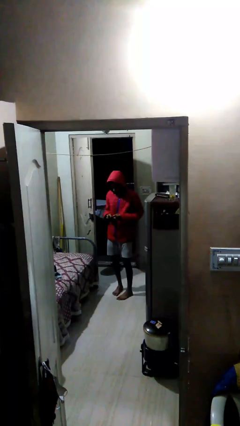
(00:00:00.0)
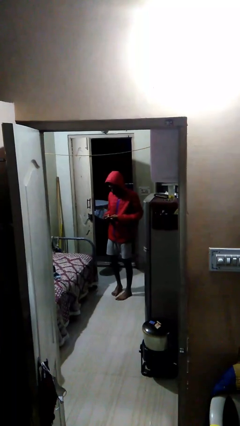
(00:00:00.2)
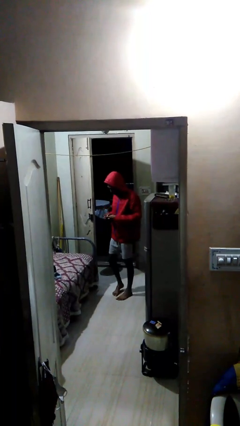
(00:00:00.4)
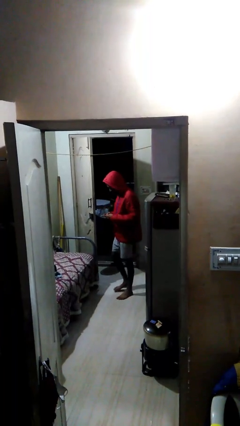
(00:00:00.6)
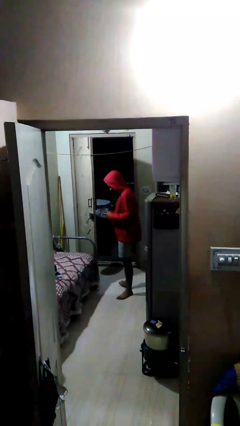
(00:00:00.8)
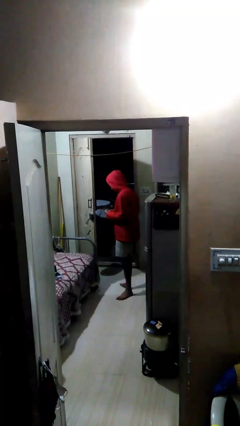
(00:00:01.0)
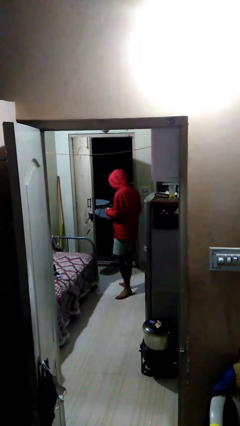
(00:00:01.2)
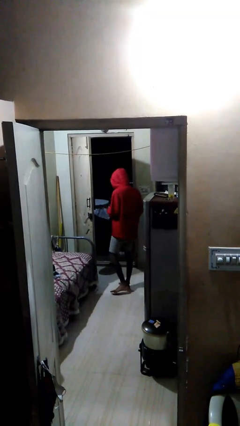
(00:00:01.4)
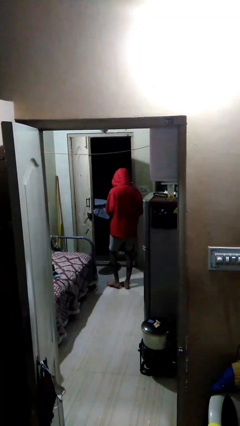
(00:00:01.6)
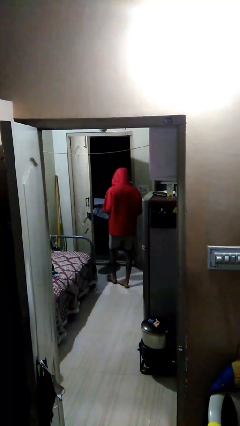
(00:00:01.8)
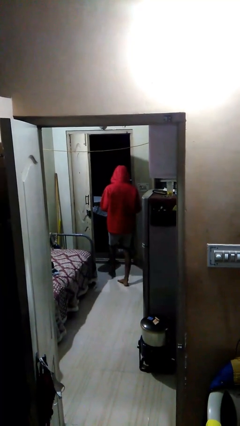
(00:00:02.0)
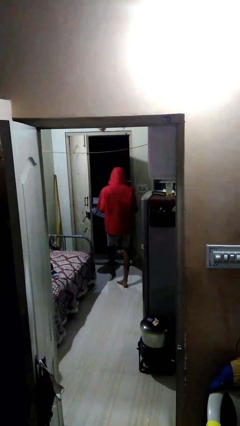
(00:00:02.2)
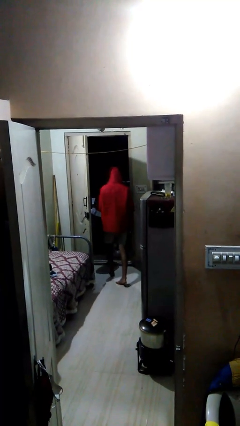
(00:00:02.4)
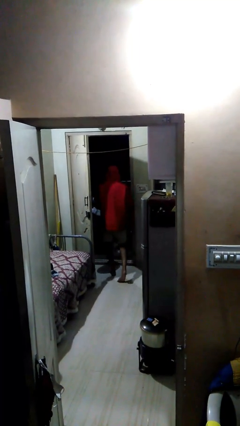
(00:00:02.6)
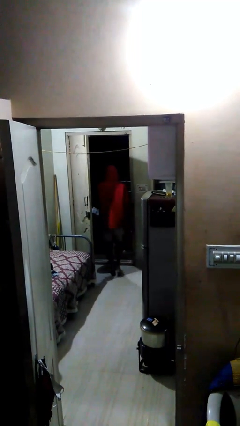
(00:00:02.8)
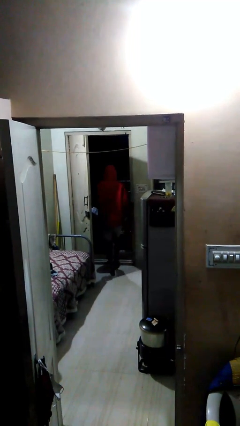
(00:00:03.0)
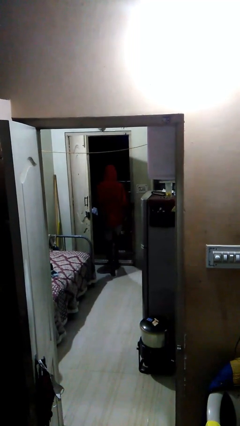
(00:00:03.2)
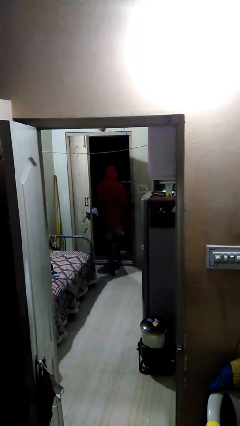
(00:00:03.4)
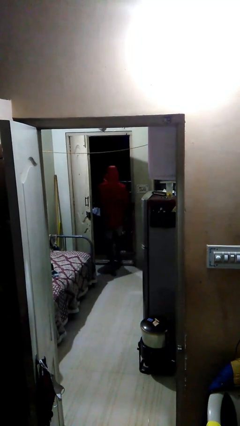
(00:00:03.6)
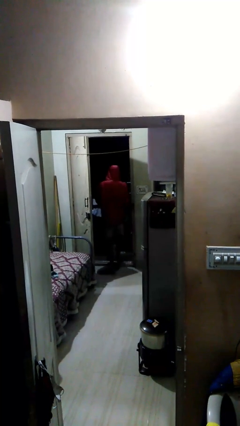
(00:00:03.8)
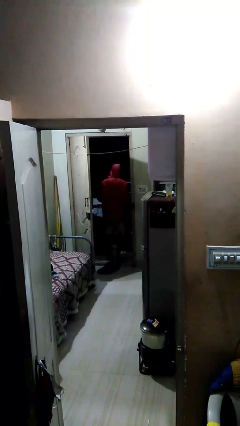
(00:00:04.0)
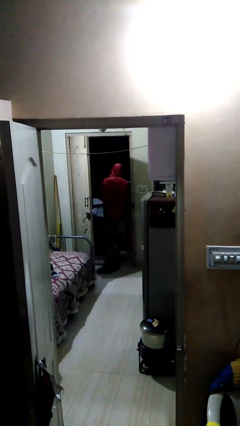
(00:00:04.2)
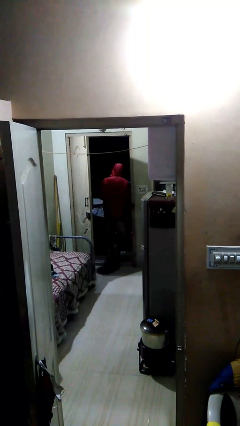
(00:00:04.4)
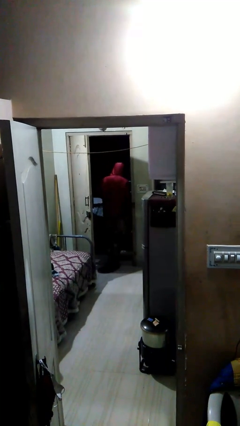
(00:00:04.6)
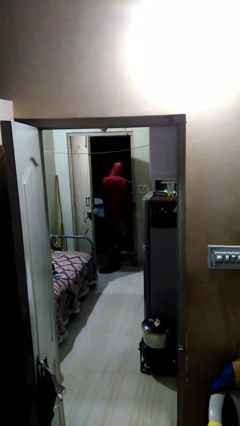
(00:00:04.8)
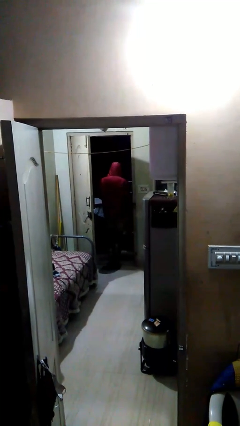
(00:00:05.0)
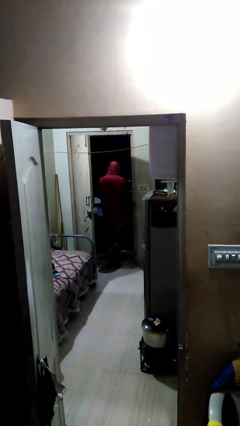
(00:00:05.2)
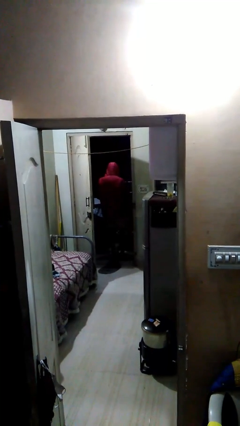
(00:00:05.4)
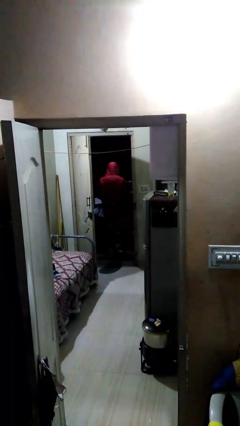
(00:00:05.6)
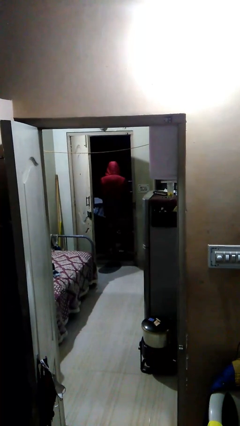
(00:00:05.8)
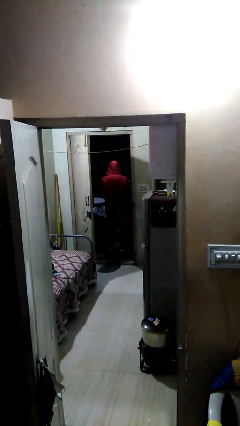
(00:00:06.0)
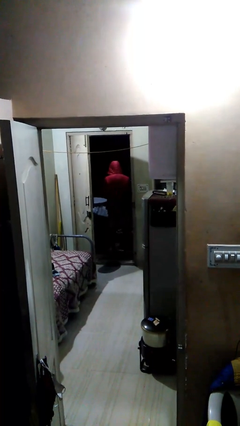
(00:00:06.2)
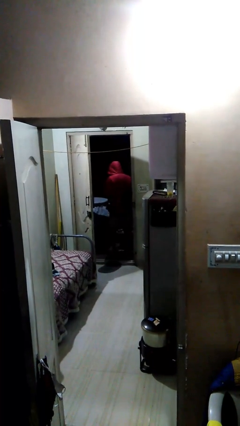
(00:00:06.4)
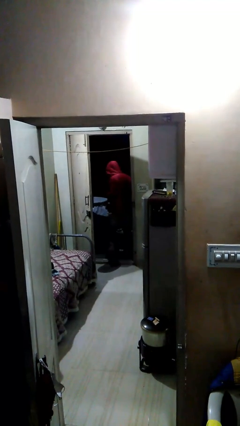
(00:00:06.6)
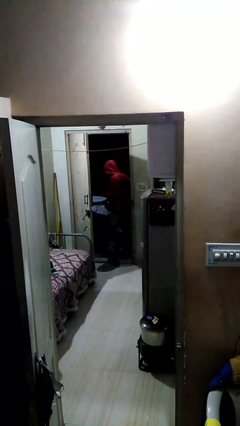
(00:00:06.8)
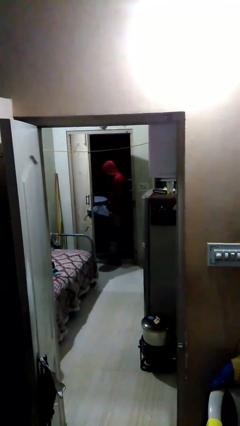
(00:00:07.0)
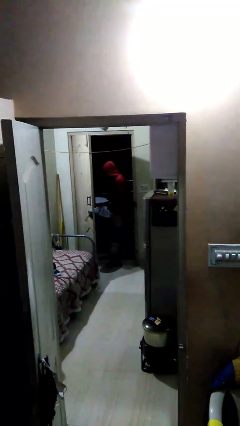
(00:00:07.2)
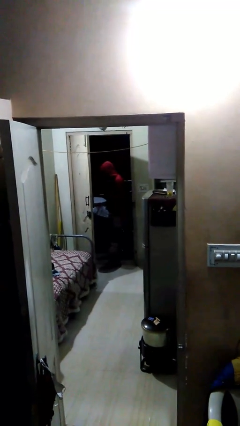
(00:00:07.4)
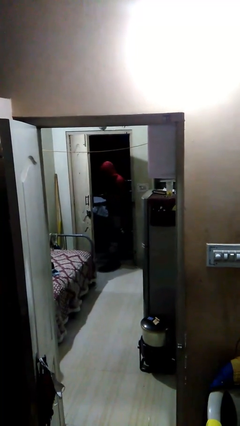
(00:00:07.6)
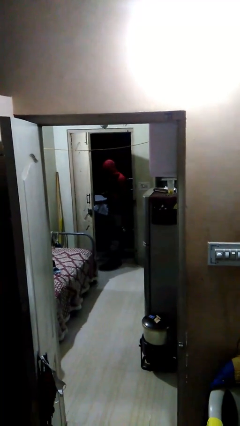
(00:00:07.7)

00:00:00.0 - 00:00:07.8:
person exits scene through structure

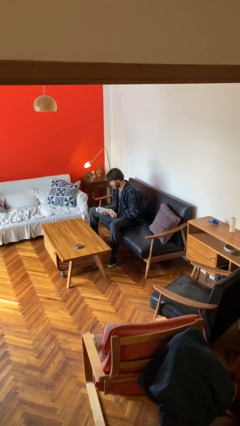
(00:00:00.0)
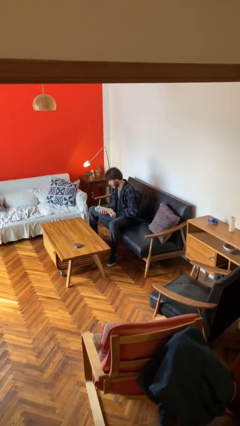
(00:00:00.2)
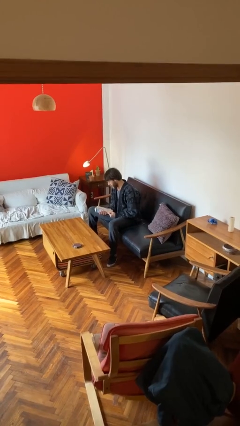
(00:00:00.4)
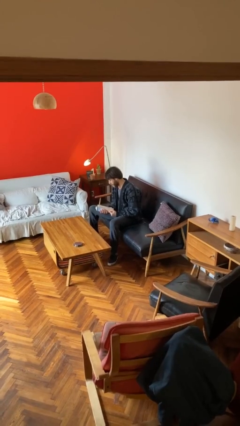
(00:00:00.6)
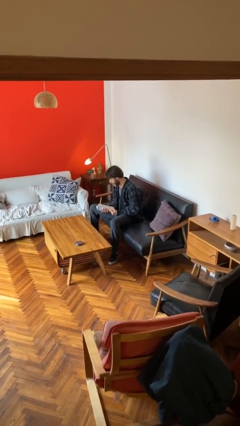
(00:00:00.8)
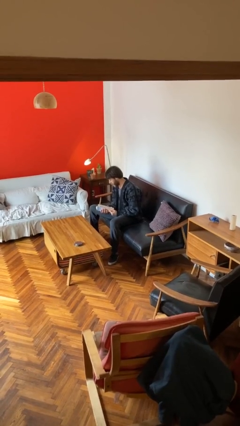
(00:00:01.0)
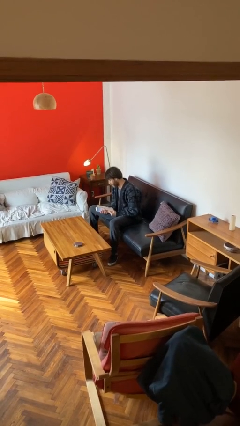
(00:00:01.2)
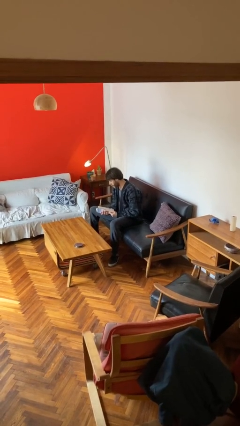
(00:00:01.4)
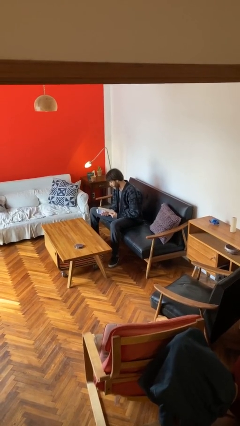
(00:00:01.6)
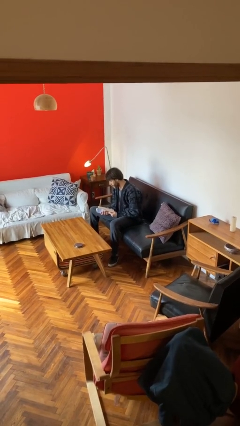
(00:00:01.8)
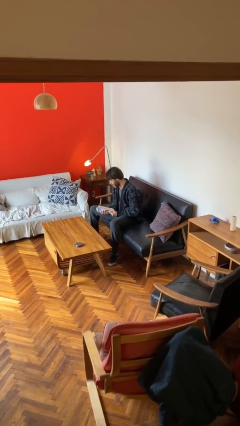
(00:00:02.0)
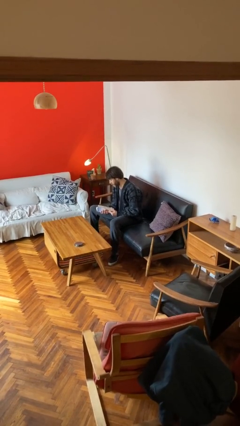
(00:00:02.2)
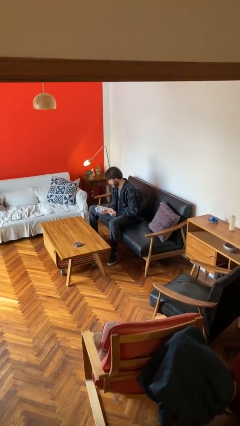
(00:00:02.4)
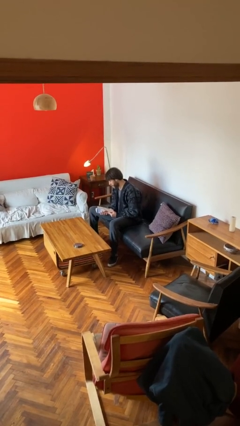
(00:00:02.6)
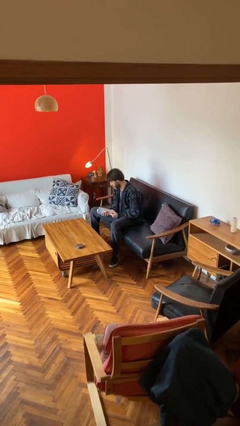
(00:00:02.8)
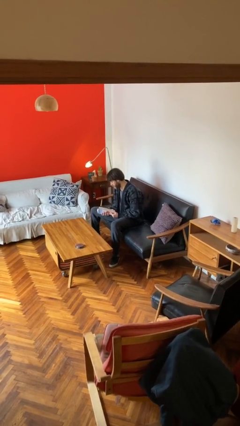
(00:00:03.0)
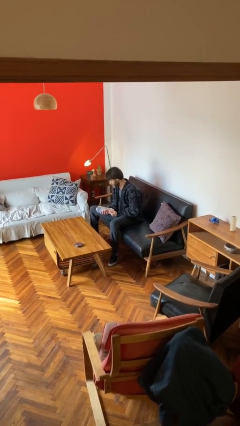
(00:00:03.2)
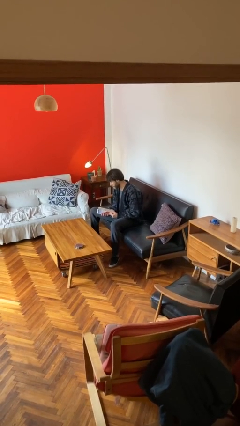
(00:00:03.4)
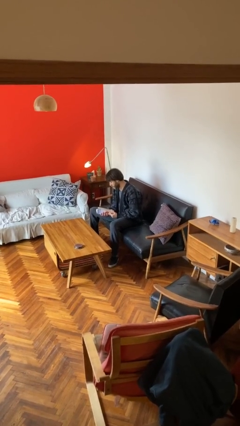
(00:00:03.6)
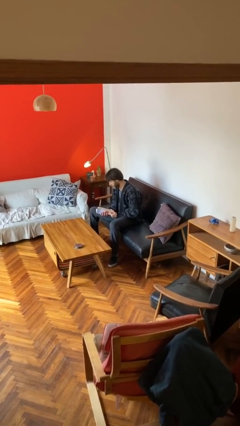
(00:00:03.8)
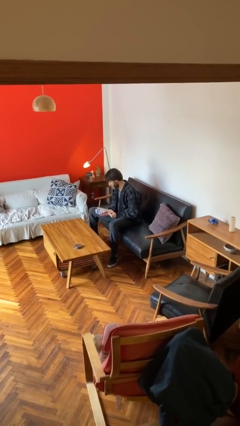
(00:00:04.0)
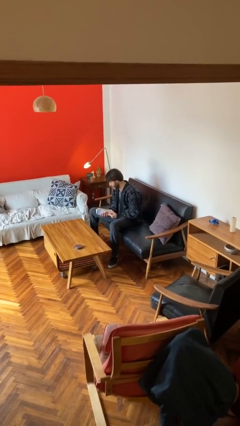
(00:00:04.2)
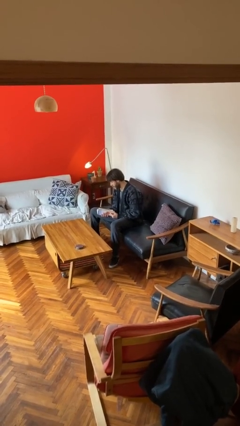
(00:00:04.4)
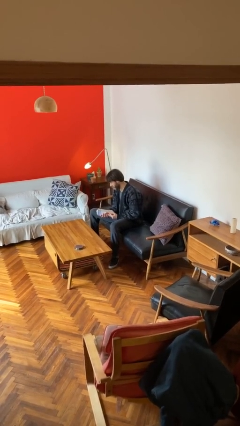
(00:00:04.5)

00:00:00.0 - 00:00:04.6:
person reads document

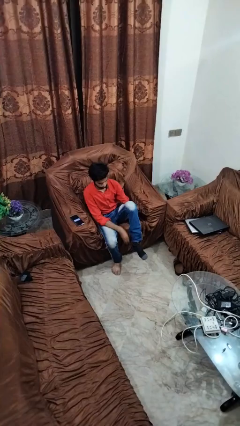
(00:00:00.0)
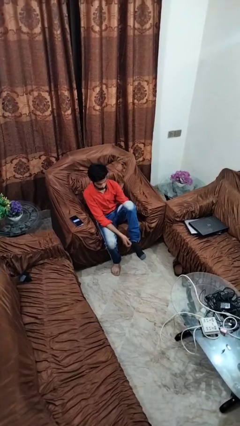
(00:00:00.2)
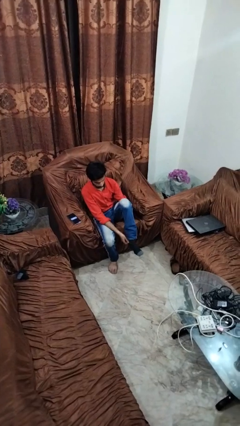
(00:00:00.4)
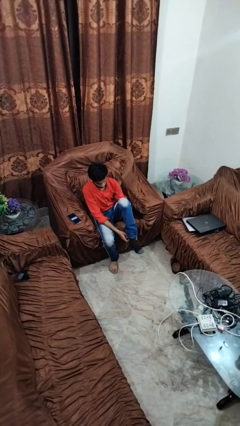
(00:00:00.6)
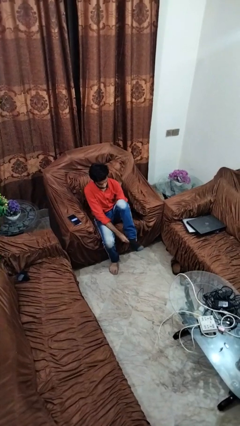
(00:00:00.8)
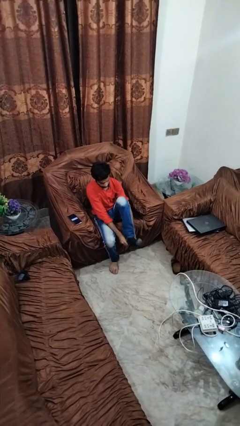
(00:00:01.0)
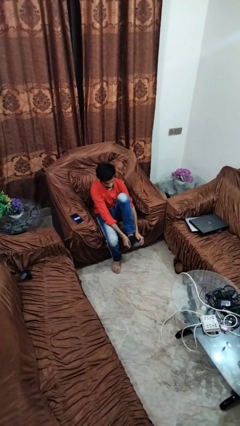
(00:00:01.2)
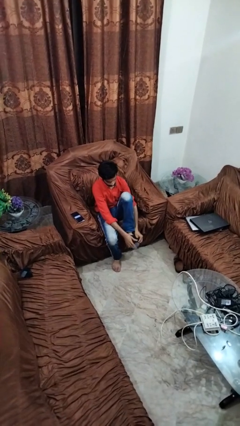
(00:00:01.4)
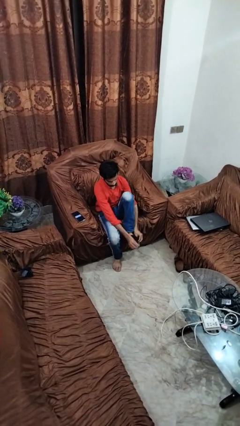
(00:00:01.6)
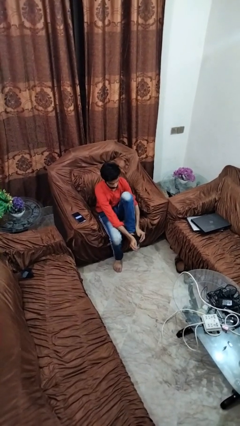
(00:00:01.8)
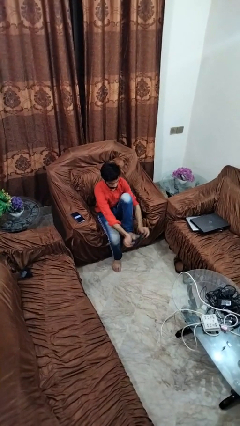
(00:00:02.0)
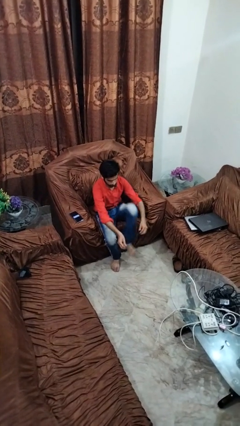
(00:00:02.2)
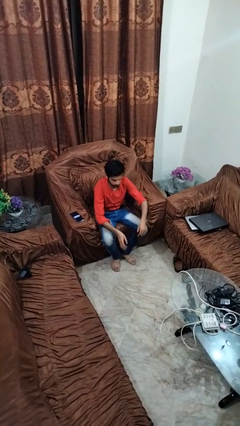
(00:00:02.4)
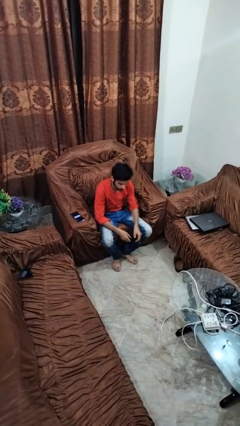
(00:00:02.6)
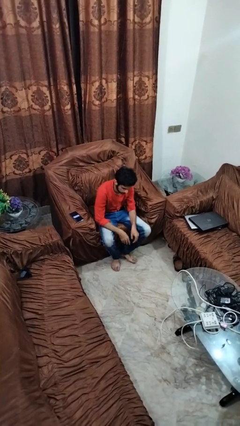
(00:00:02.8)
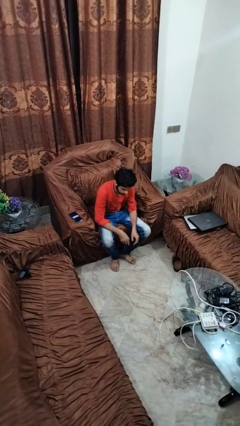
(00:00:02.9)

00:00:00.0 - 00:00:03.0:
person takes off socks

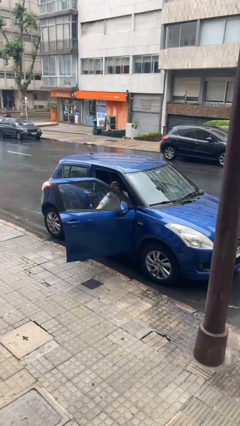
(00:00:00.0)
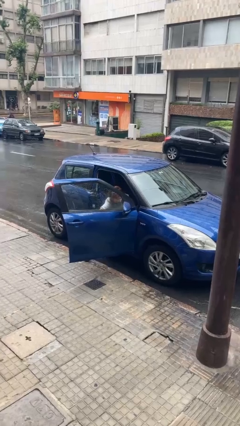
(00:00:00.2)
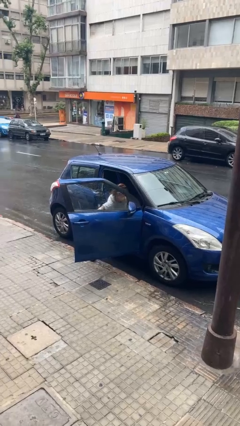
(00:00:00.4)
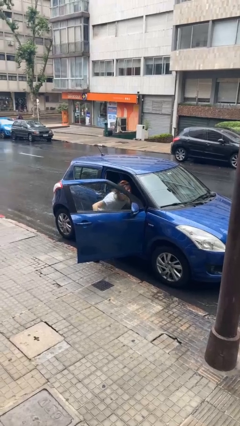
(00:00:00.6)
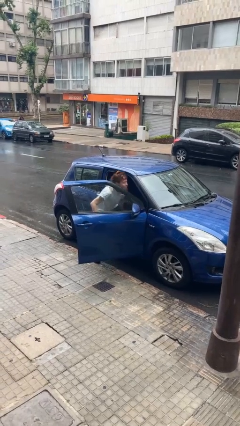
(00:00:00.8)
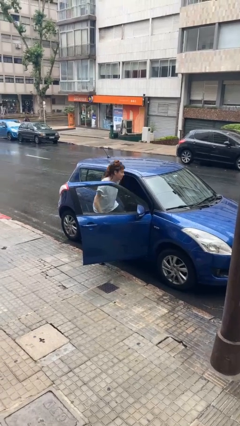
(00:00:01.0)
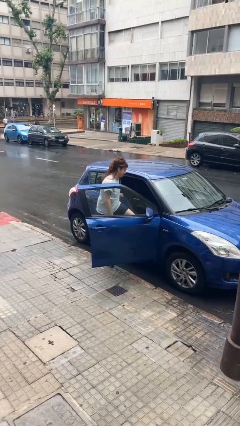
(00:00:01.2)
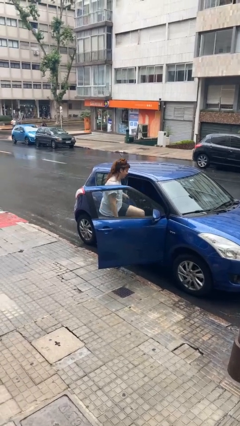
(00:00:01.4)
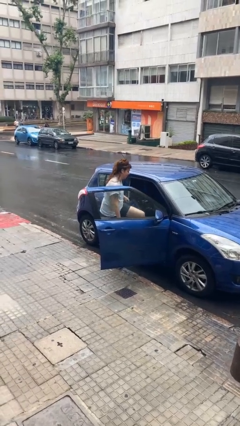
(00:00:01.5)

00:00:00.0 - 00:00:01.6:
person exits car

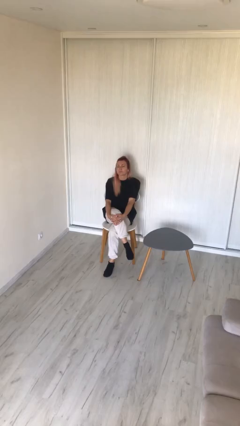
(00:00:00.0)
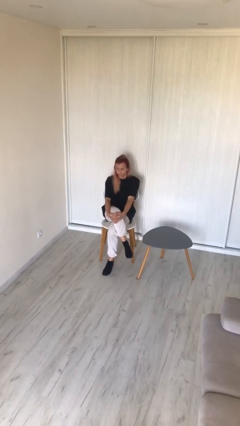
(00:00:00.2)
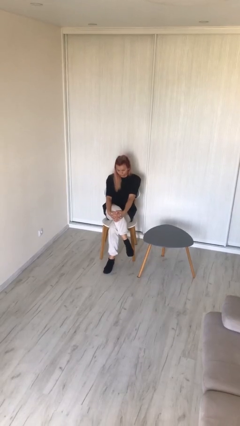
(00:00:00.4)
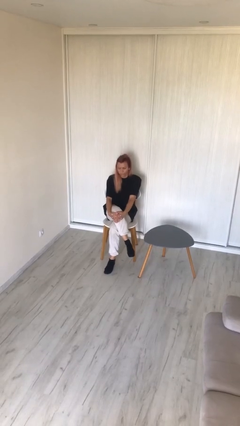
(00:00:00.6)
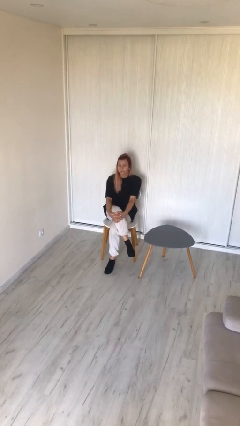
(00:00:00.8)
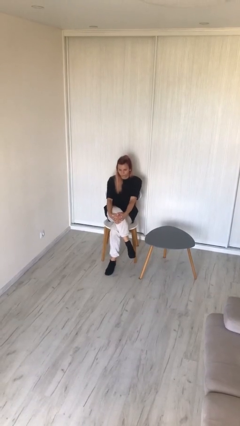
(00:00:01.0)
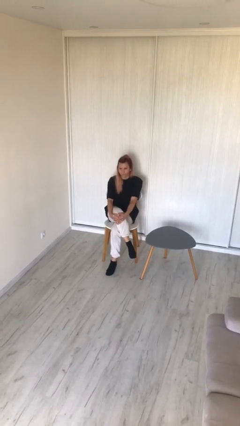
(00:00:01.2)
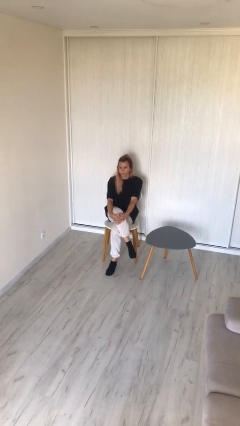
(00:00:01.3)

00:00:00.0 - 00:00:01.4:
person nods head
